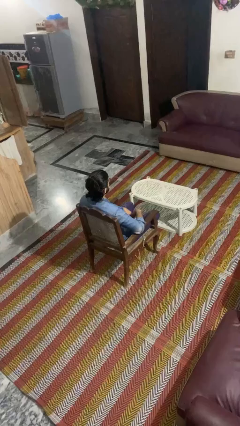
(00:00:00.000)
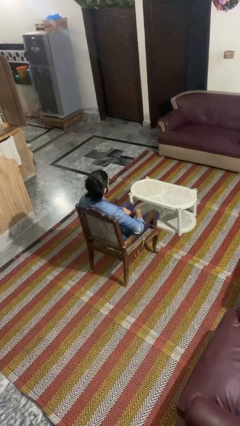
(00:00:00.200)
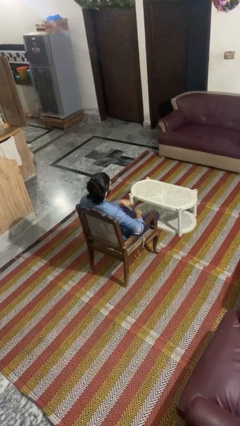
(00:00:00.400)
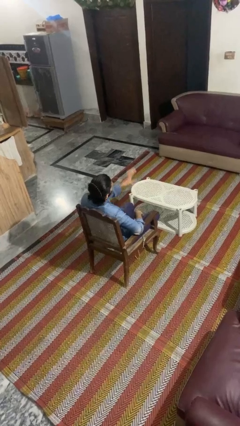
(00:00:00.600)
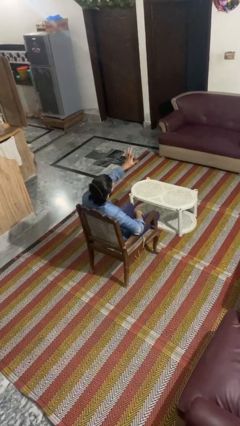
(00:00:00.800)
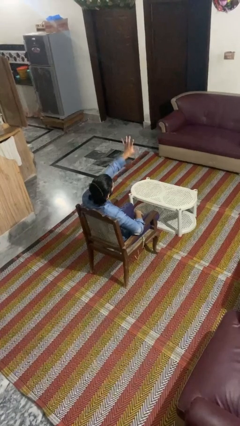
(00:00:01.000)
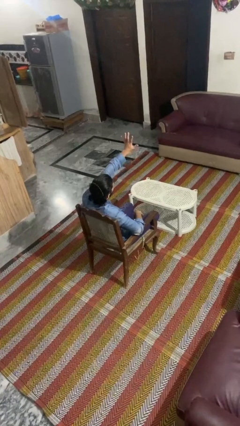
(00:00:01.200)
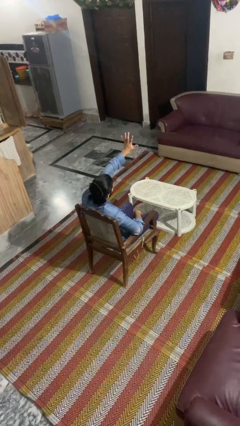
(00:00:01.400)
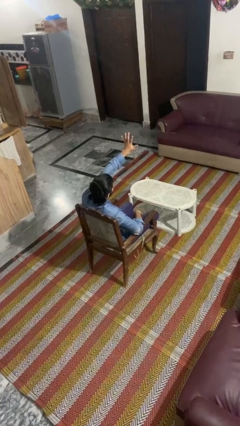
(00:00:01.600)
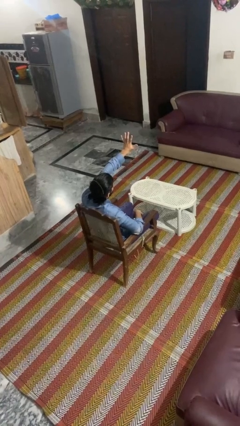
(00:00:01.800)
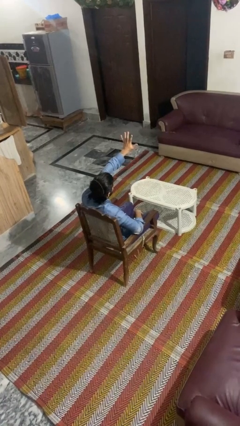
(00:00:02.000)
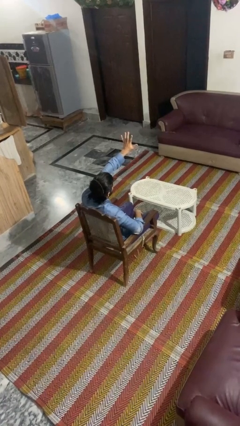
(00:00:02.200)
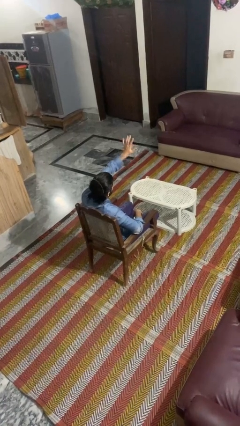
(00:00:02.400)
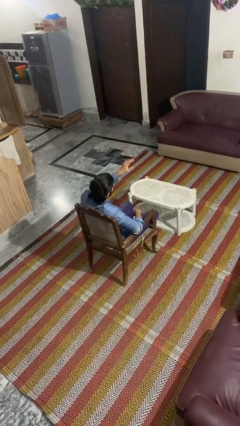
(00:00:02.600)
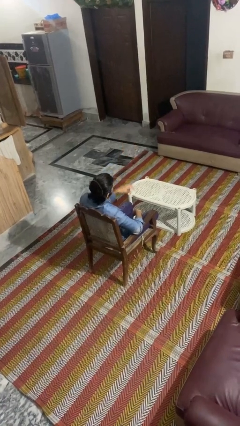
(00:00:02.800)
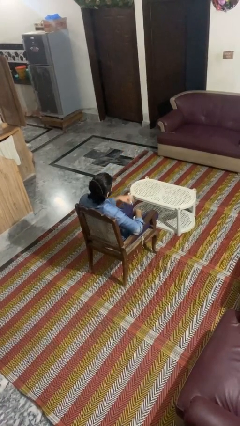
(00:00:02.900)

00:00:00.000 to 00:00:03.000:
person gestures number five

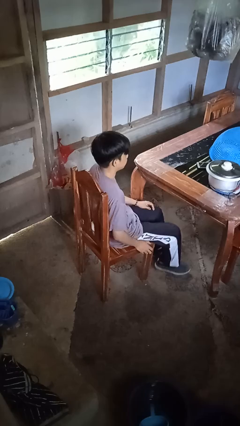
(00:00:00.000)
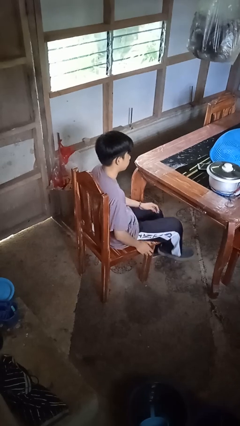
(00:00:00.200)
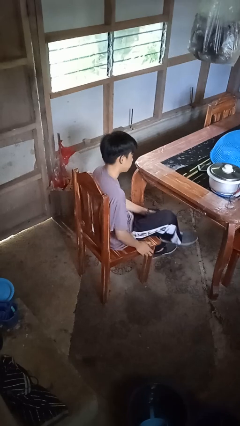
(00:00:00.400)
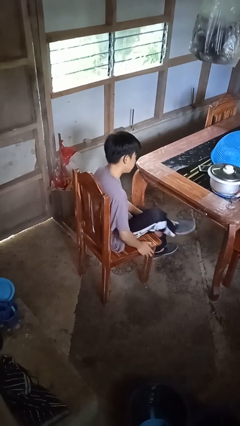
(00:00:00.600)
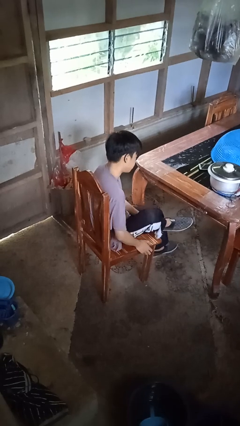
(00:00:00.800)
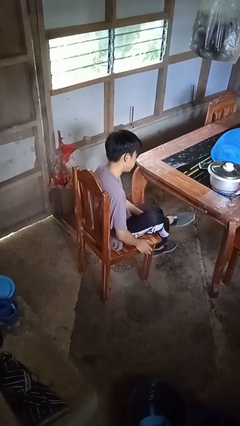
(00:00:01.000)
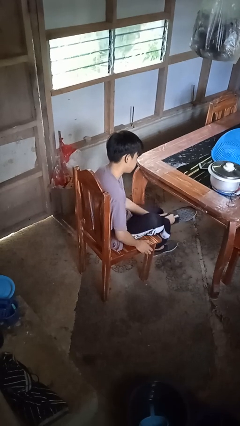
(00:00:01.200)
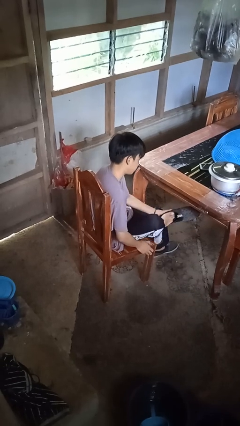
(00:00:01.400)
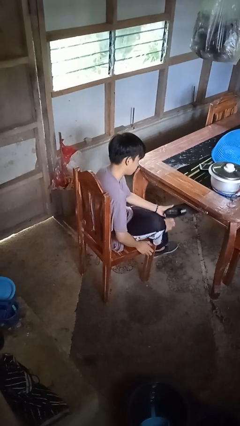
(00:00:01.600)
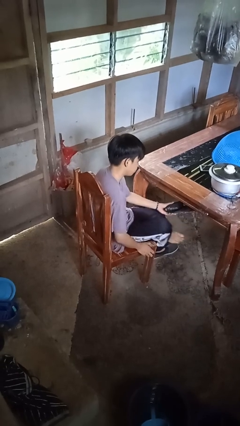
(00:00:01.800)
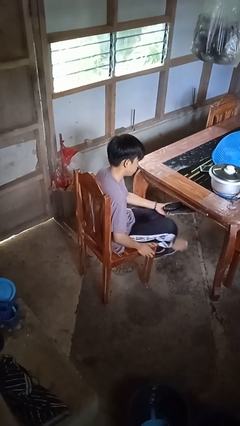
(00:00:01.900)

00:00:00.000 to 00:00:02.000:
person takes off shoes

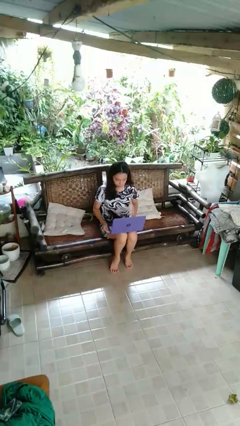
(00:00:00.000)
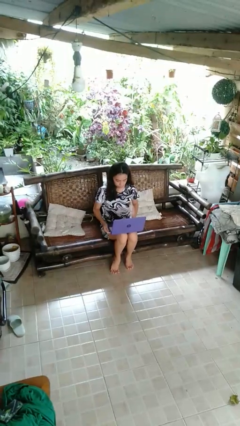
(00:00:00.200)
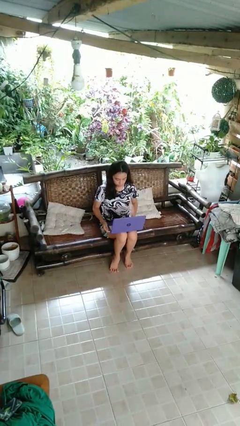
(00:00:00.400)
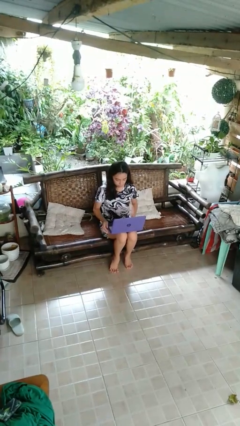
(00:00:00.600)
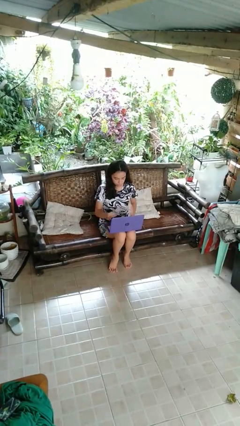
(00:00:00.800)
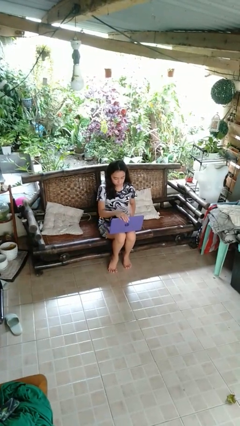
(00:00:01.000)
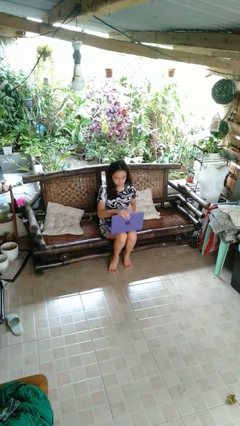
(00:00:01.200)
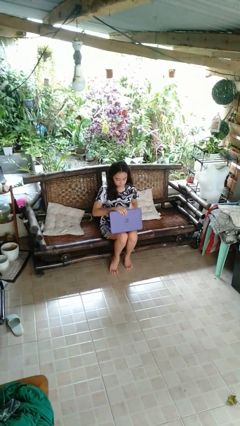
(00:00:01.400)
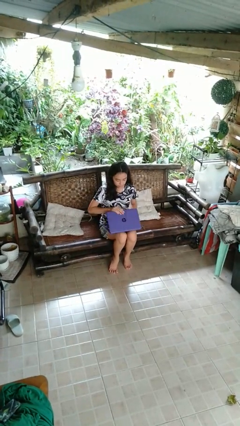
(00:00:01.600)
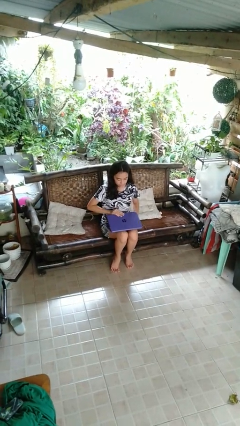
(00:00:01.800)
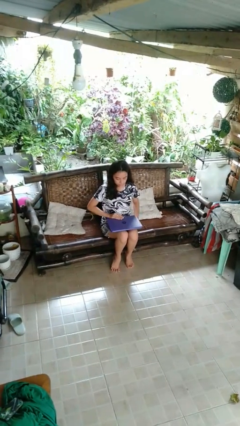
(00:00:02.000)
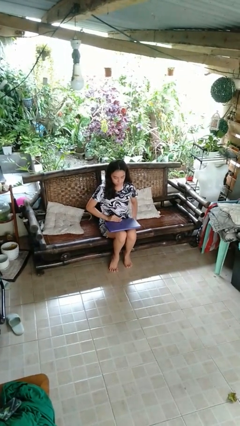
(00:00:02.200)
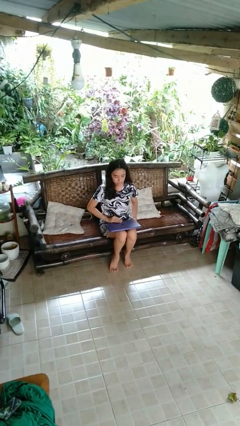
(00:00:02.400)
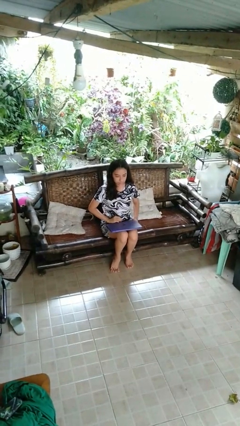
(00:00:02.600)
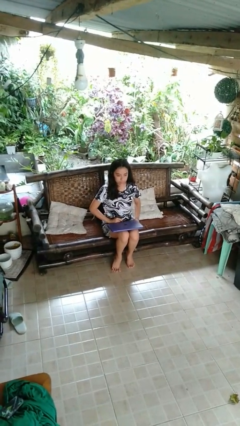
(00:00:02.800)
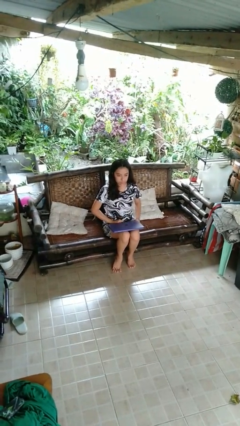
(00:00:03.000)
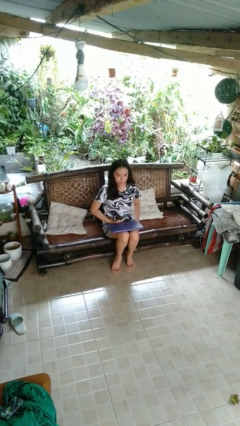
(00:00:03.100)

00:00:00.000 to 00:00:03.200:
person closes laptop

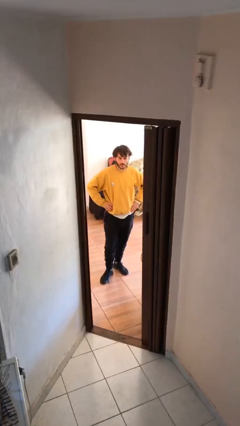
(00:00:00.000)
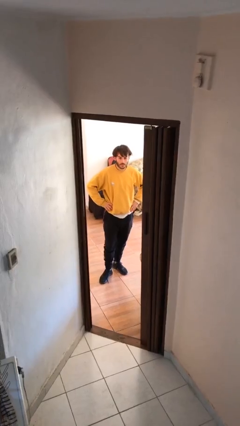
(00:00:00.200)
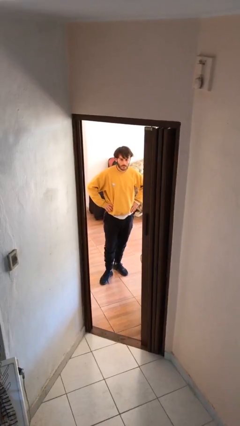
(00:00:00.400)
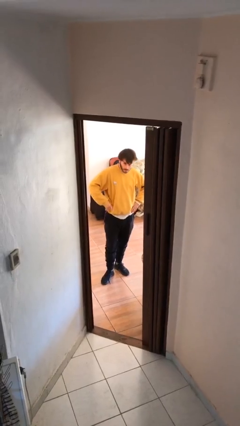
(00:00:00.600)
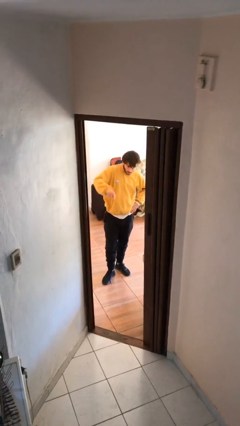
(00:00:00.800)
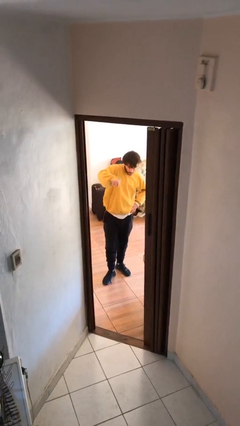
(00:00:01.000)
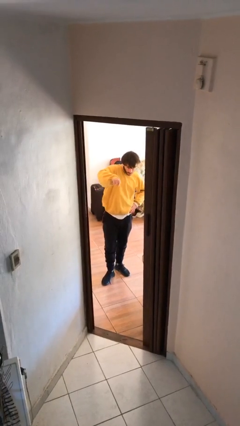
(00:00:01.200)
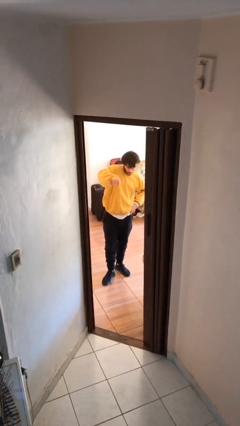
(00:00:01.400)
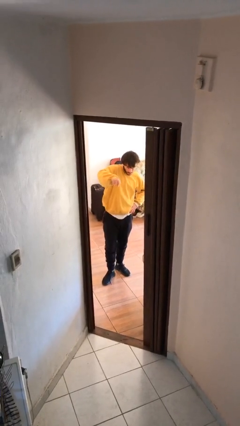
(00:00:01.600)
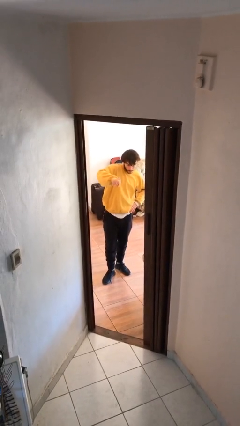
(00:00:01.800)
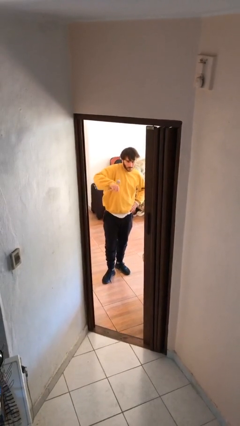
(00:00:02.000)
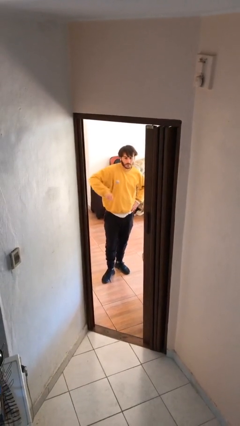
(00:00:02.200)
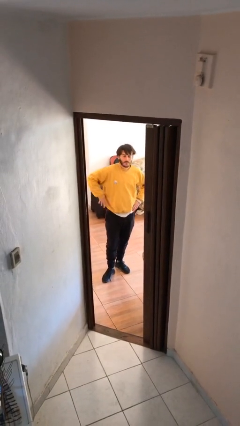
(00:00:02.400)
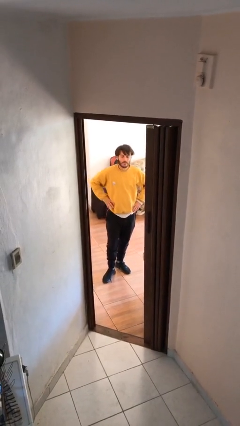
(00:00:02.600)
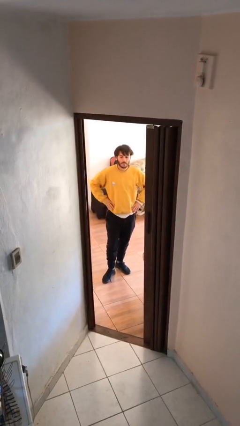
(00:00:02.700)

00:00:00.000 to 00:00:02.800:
person points at person

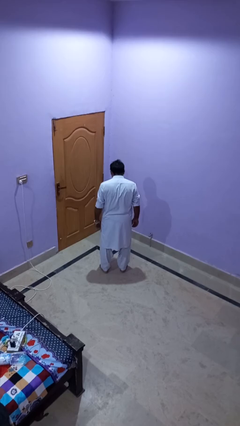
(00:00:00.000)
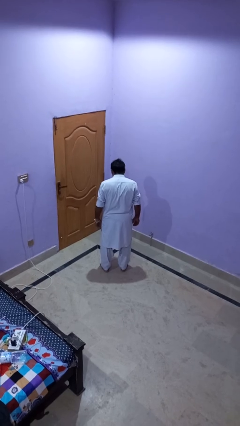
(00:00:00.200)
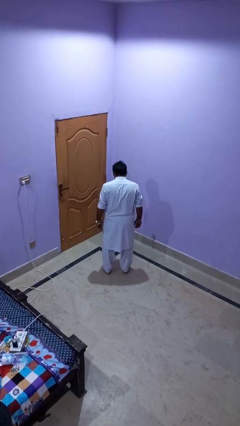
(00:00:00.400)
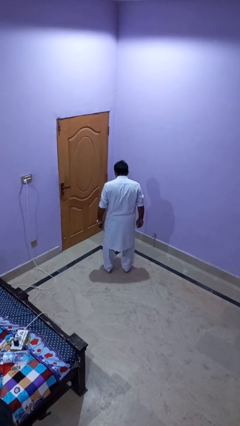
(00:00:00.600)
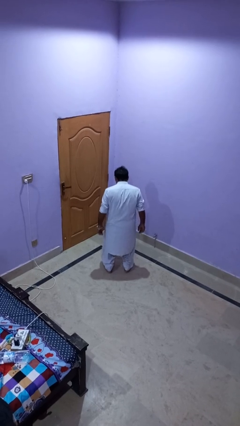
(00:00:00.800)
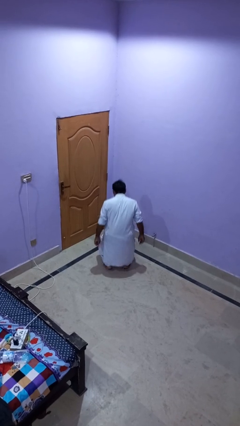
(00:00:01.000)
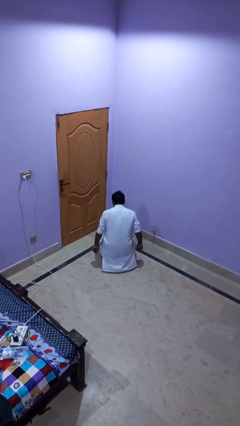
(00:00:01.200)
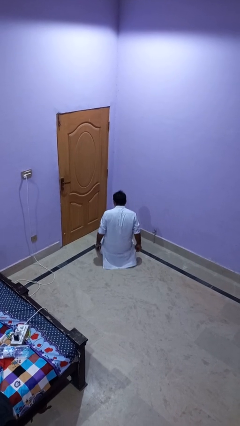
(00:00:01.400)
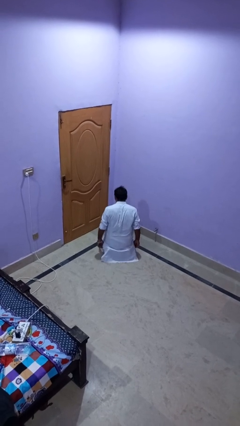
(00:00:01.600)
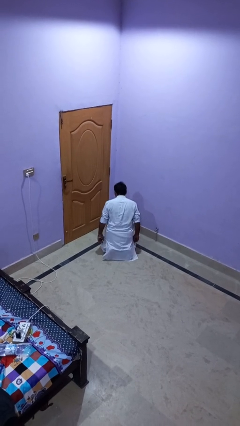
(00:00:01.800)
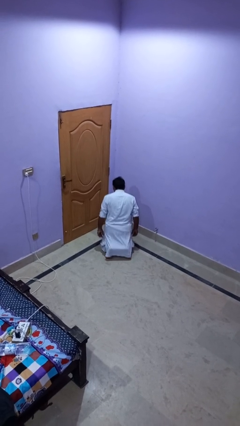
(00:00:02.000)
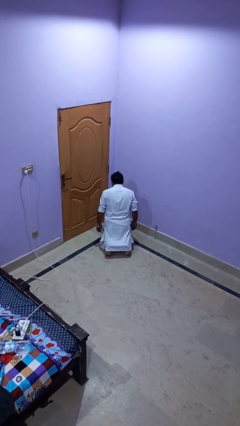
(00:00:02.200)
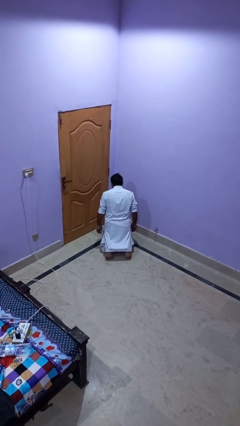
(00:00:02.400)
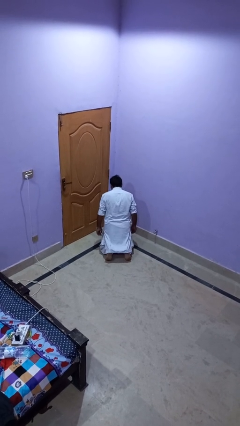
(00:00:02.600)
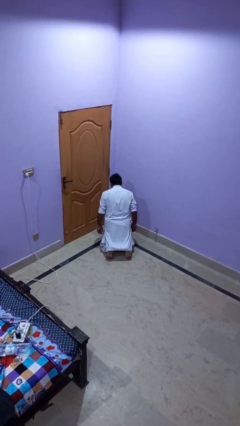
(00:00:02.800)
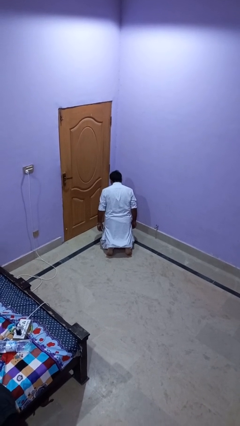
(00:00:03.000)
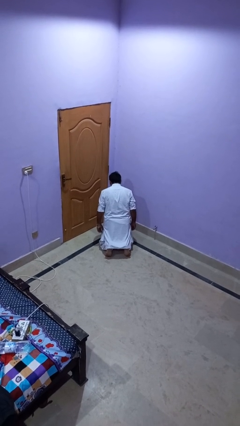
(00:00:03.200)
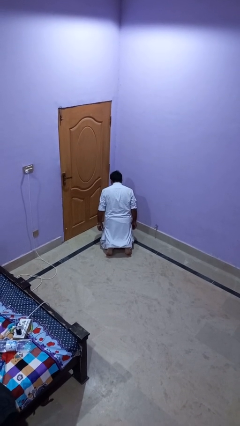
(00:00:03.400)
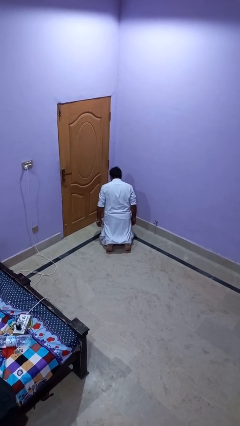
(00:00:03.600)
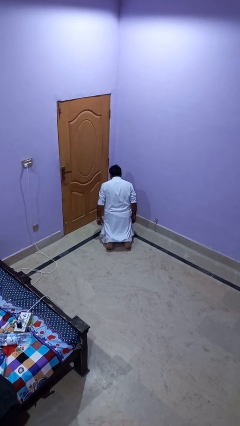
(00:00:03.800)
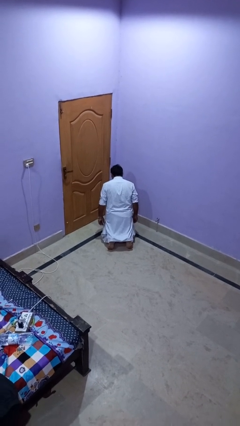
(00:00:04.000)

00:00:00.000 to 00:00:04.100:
person kneels

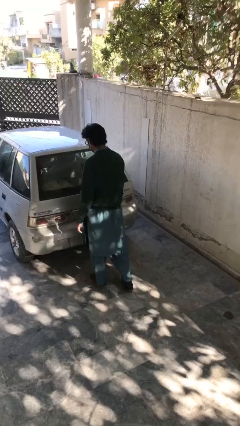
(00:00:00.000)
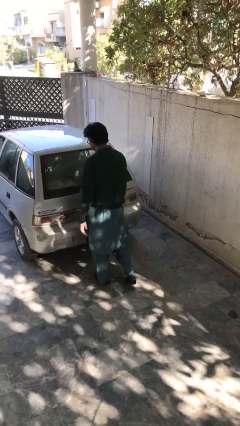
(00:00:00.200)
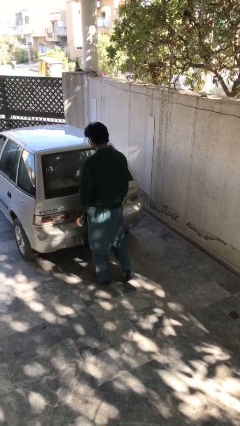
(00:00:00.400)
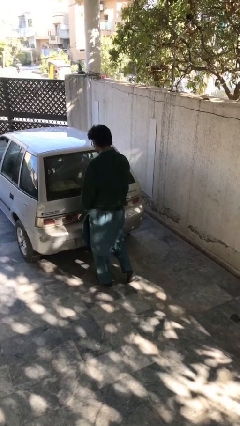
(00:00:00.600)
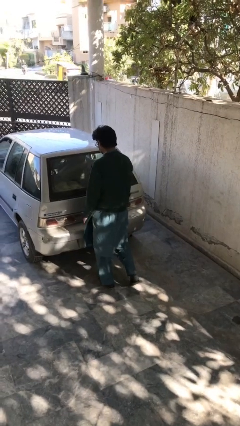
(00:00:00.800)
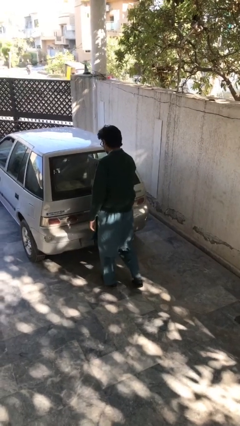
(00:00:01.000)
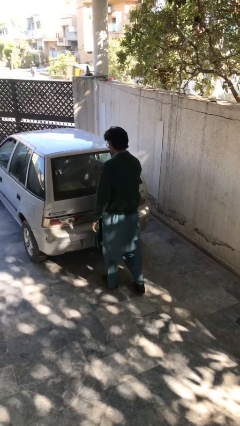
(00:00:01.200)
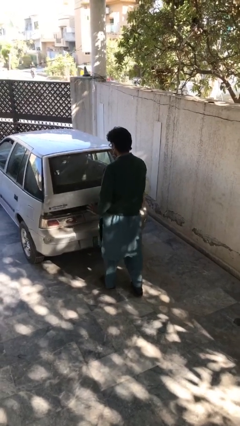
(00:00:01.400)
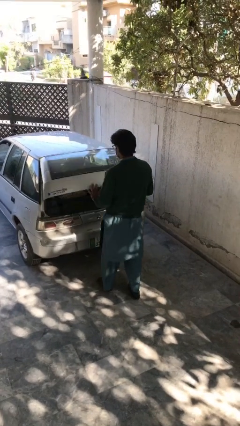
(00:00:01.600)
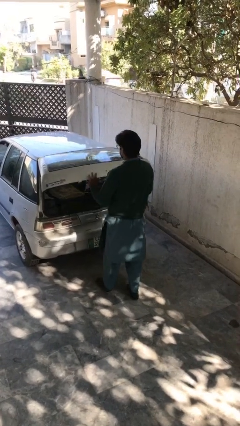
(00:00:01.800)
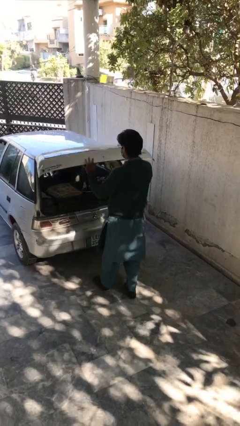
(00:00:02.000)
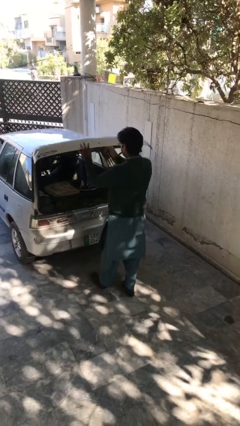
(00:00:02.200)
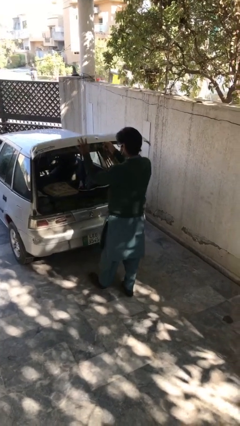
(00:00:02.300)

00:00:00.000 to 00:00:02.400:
person opens car trunk
